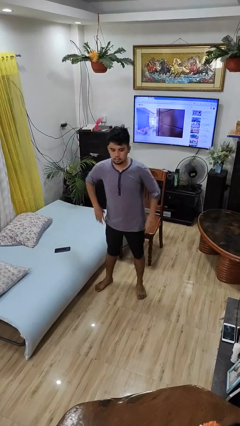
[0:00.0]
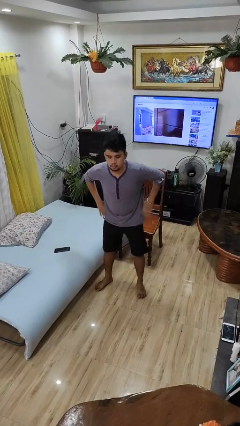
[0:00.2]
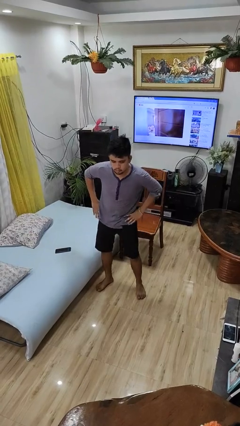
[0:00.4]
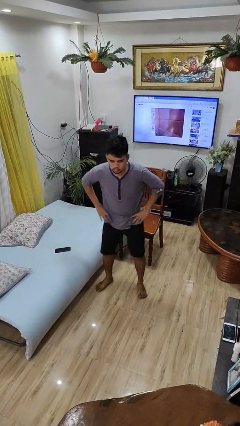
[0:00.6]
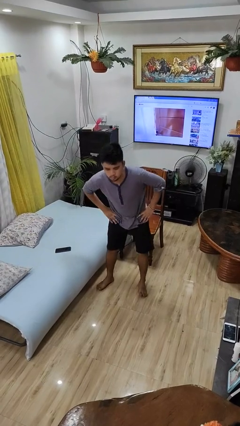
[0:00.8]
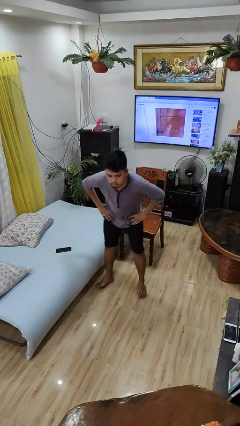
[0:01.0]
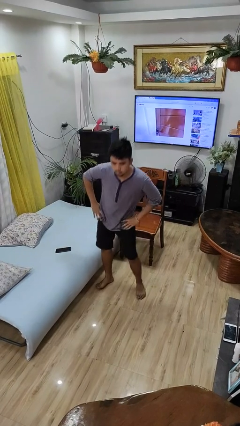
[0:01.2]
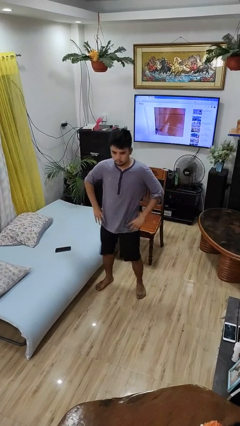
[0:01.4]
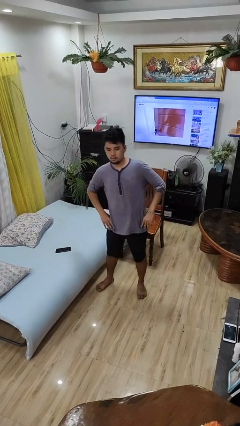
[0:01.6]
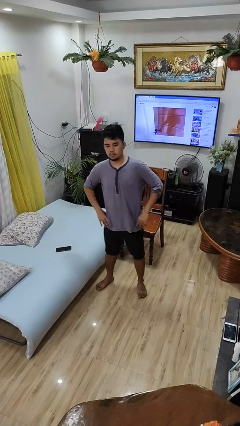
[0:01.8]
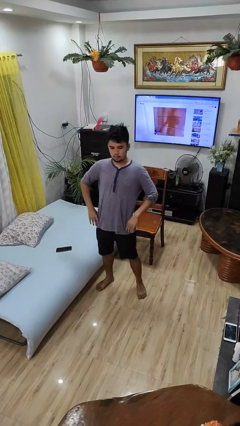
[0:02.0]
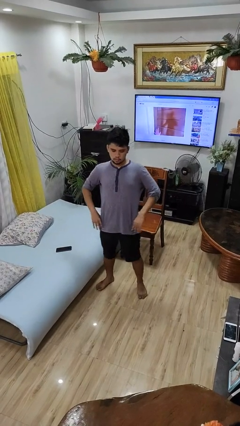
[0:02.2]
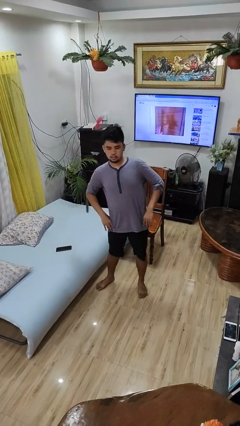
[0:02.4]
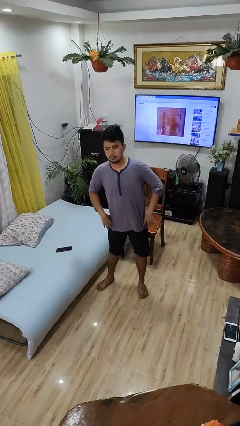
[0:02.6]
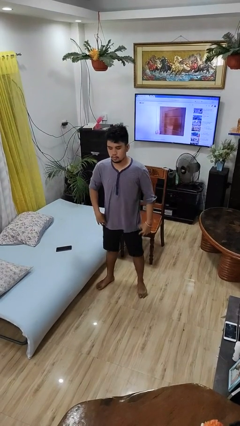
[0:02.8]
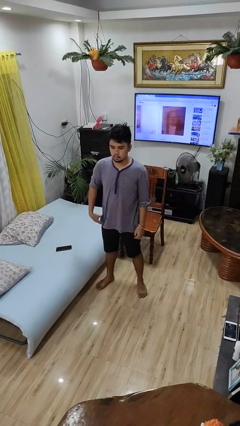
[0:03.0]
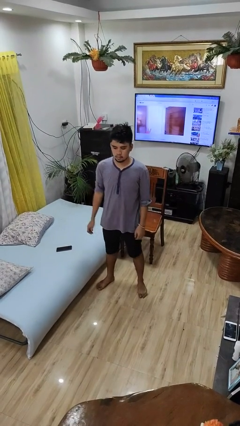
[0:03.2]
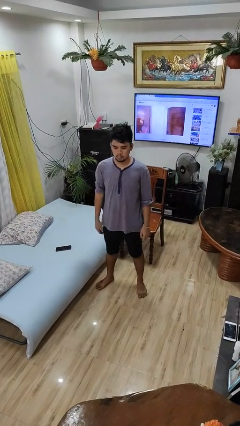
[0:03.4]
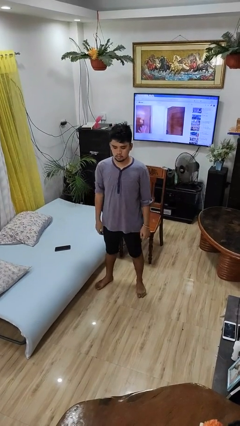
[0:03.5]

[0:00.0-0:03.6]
person wiggles hips

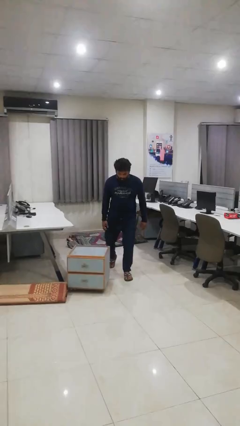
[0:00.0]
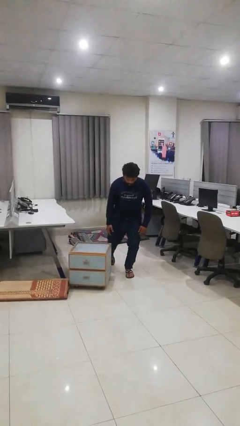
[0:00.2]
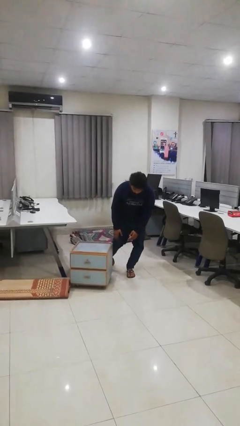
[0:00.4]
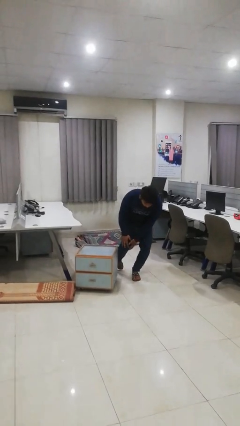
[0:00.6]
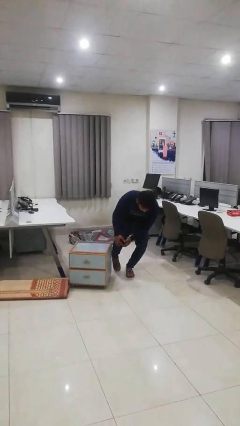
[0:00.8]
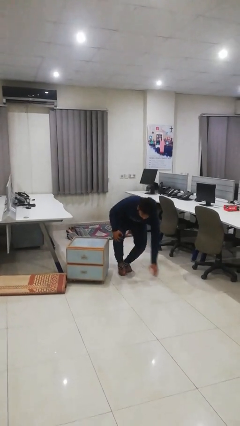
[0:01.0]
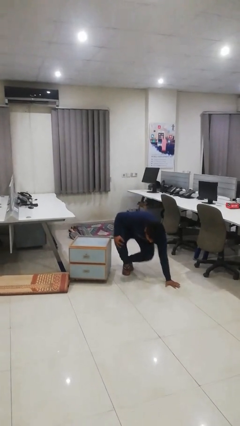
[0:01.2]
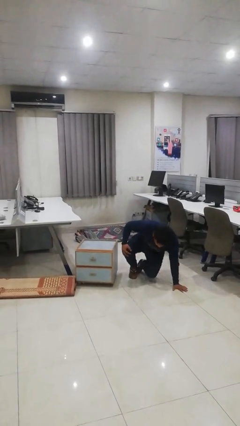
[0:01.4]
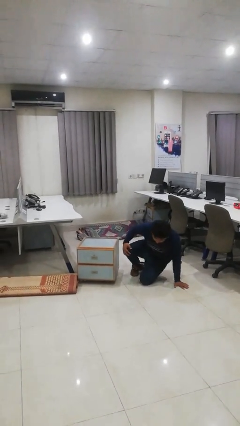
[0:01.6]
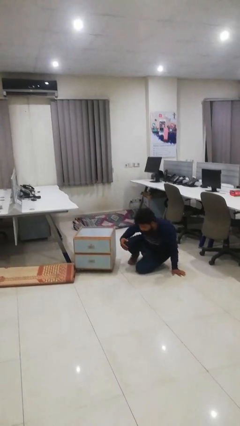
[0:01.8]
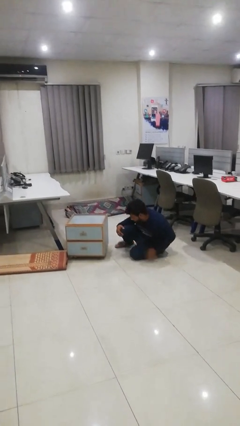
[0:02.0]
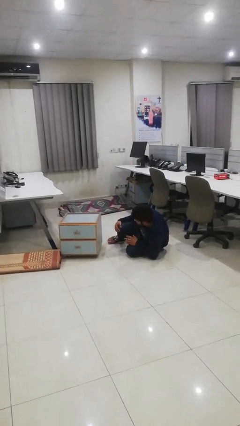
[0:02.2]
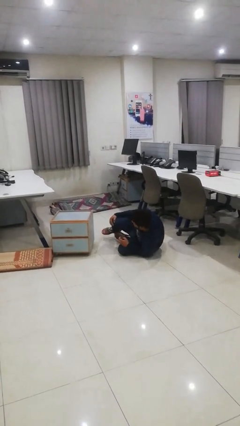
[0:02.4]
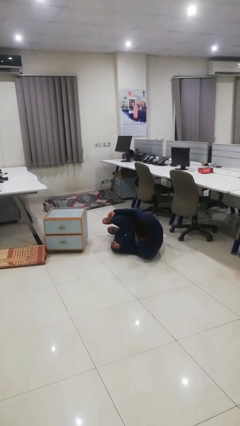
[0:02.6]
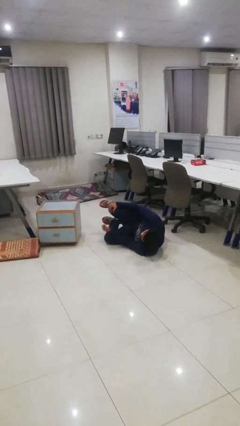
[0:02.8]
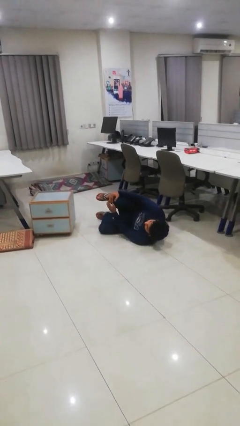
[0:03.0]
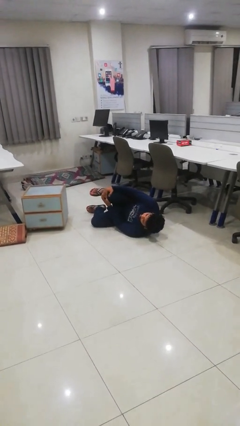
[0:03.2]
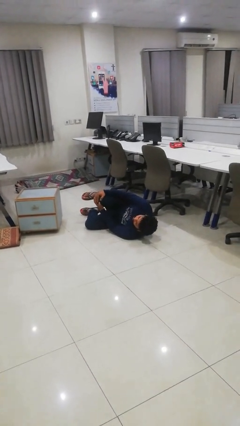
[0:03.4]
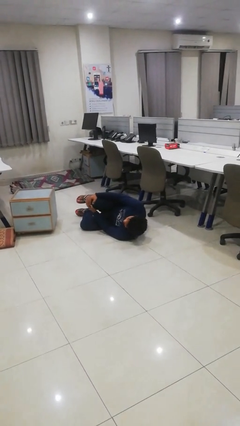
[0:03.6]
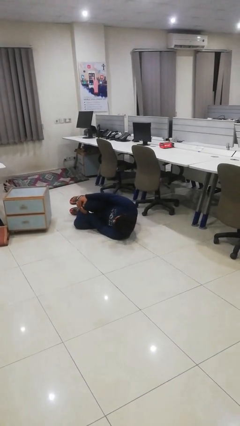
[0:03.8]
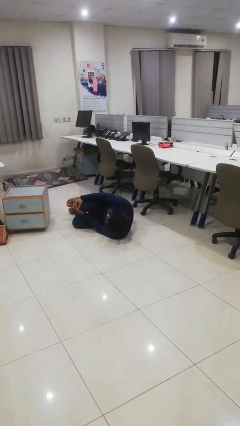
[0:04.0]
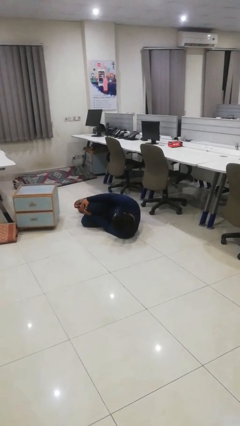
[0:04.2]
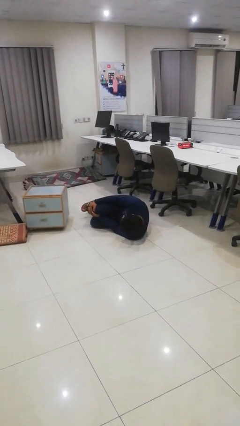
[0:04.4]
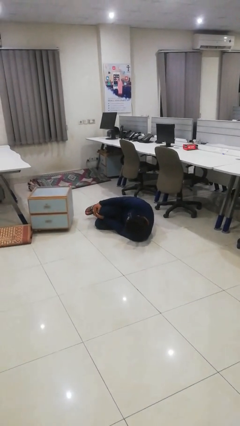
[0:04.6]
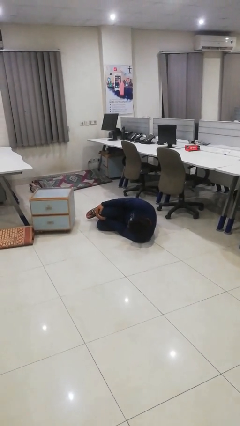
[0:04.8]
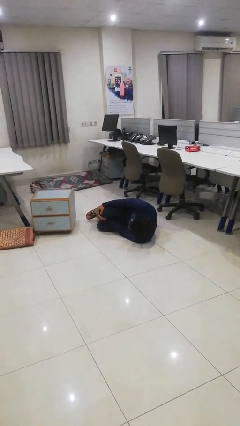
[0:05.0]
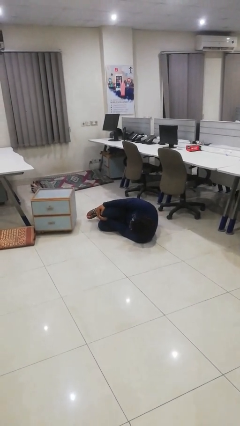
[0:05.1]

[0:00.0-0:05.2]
person trips on object on floor

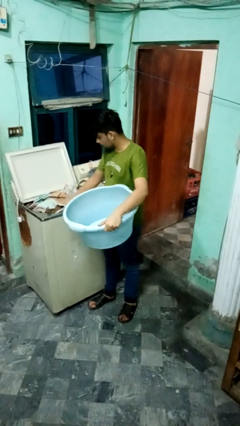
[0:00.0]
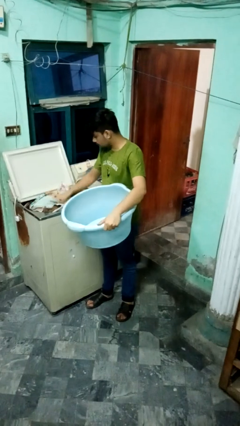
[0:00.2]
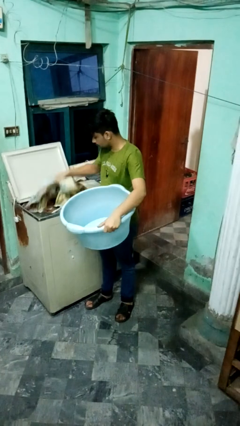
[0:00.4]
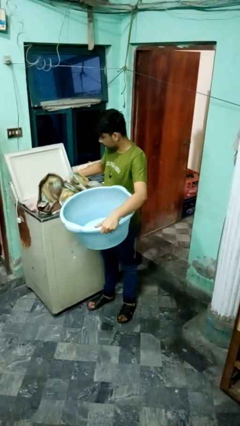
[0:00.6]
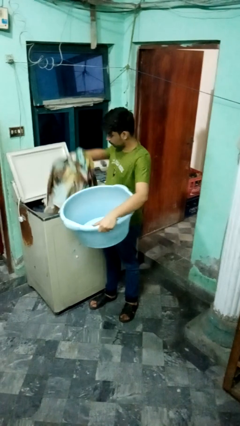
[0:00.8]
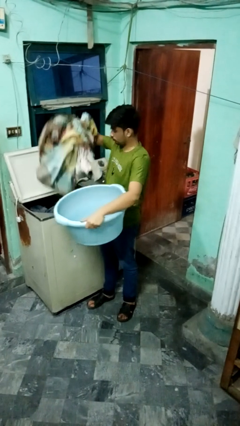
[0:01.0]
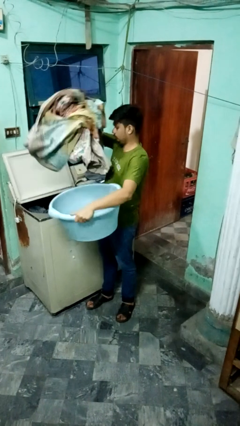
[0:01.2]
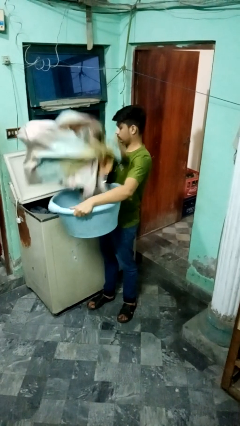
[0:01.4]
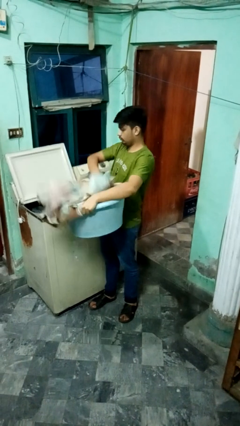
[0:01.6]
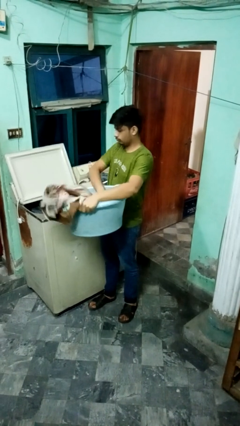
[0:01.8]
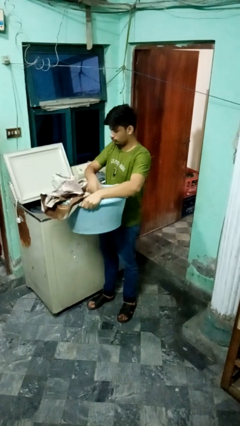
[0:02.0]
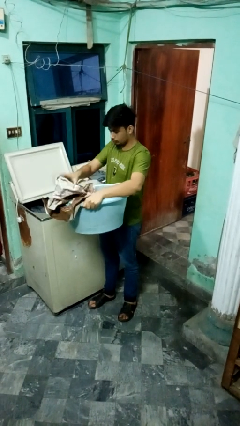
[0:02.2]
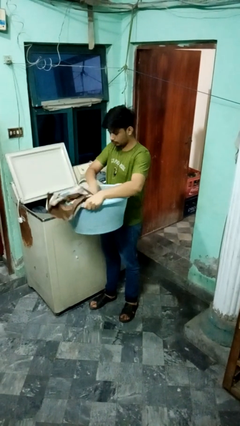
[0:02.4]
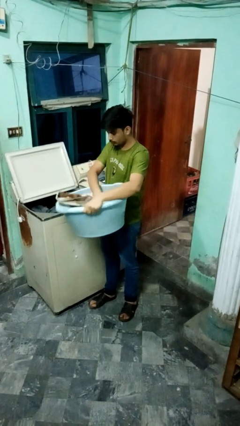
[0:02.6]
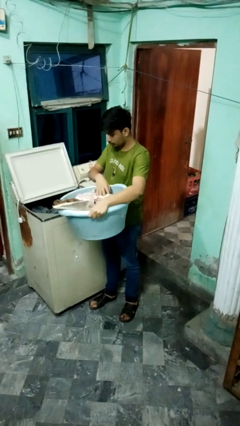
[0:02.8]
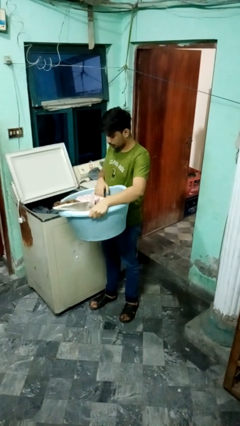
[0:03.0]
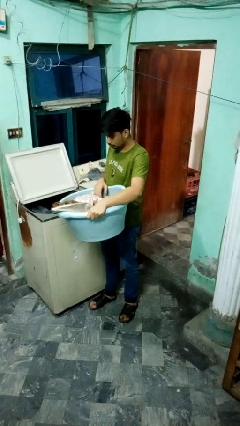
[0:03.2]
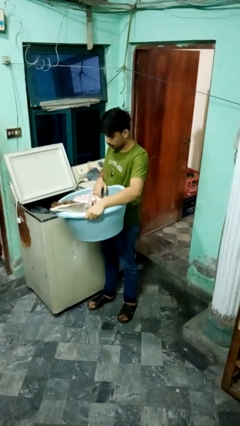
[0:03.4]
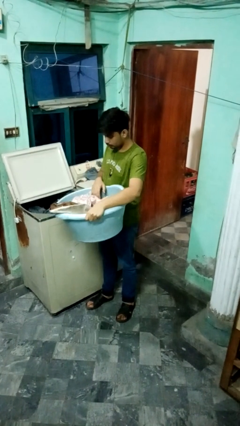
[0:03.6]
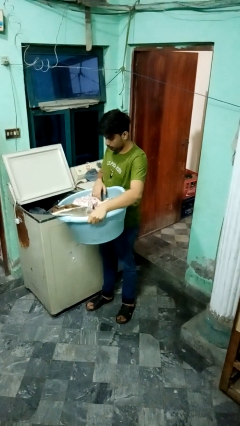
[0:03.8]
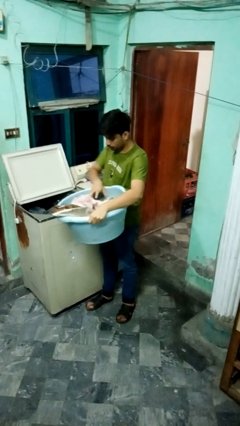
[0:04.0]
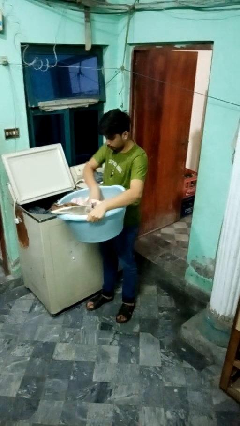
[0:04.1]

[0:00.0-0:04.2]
person unloads clotheswasher

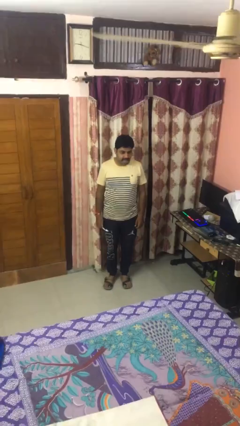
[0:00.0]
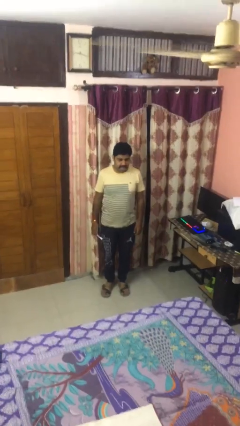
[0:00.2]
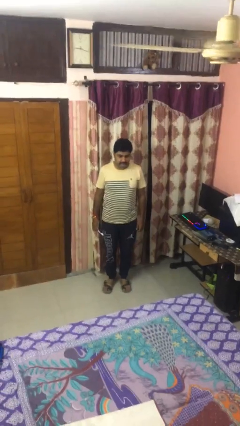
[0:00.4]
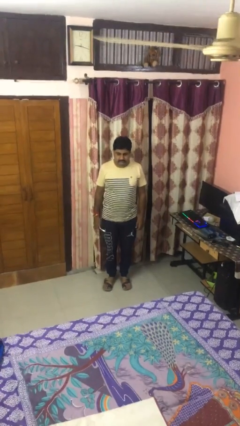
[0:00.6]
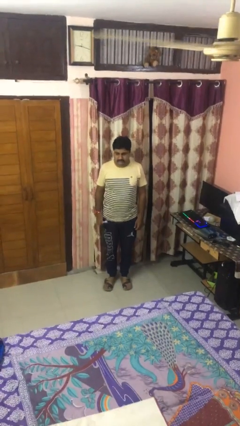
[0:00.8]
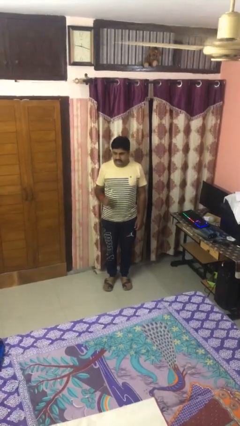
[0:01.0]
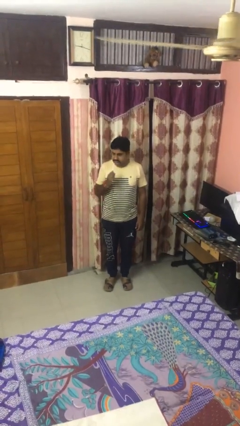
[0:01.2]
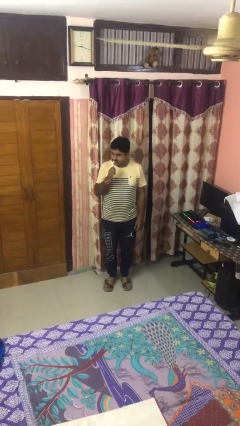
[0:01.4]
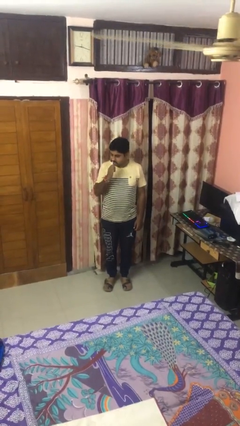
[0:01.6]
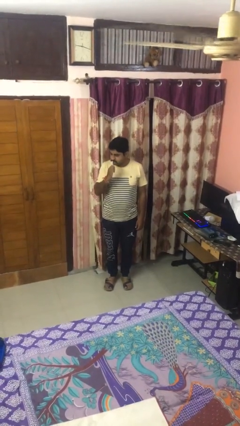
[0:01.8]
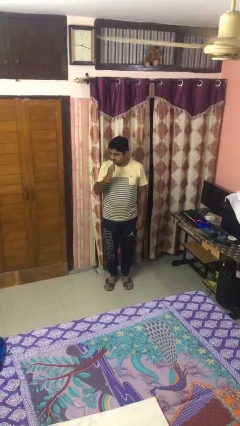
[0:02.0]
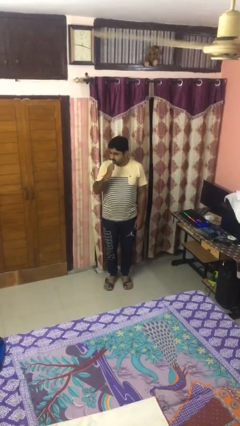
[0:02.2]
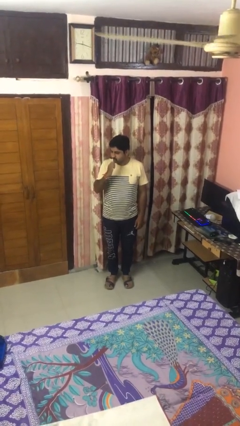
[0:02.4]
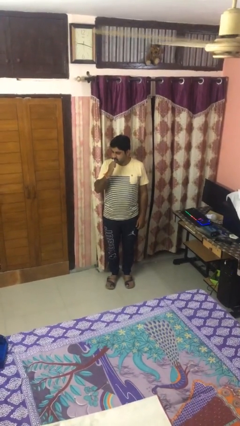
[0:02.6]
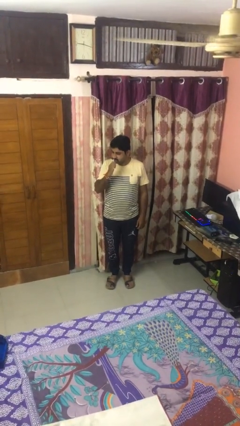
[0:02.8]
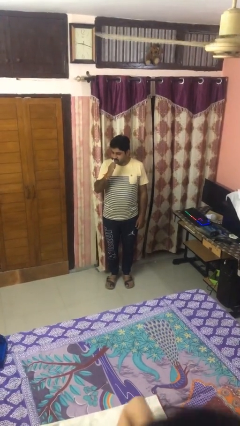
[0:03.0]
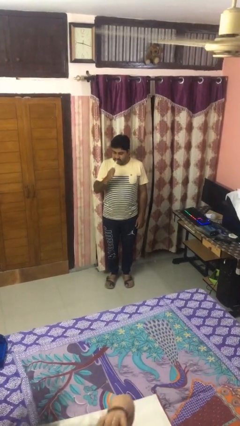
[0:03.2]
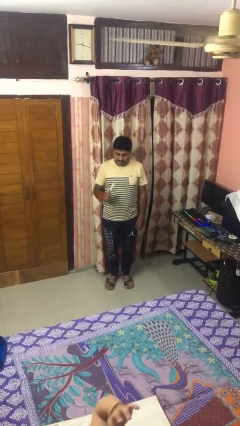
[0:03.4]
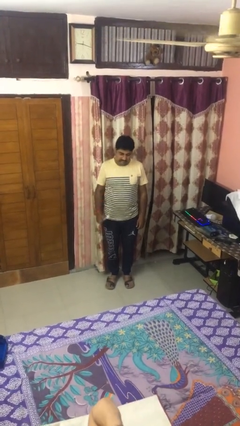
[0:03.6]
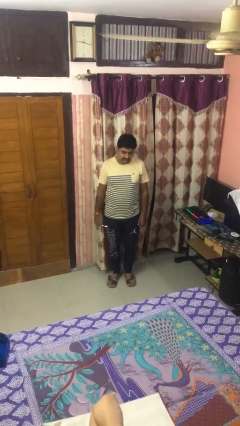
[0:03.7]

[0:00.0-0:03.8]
person brushes teeth

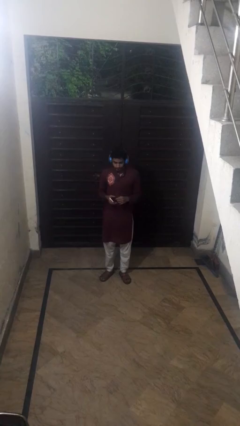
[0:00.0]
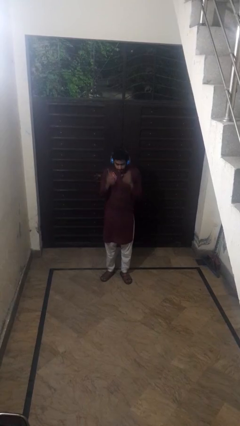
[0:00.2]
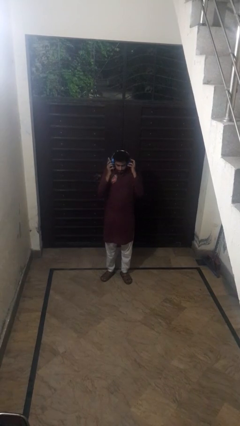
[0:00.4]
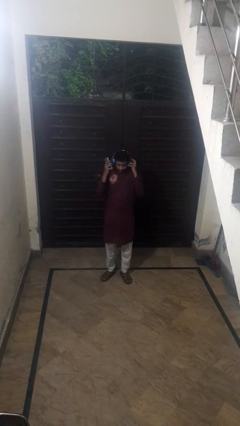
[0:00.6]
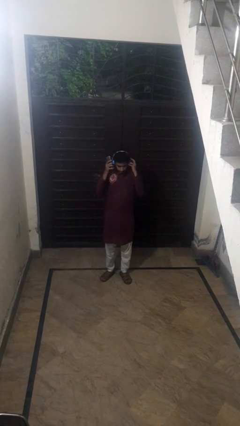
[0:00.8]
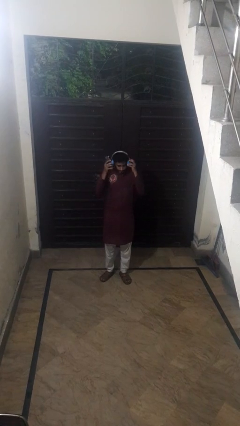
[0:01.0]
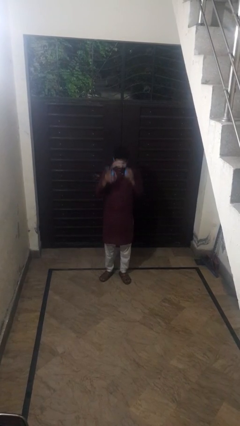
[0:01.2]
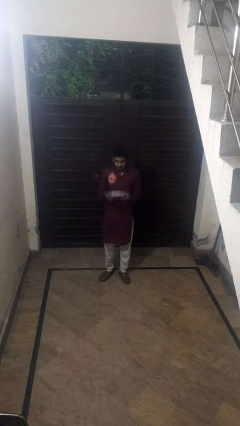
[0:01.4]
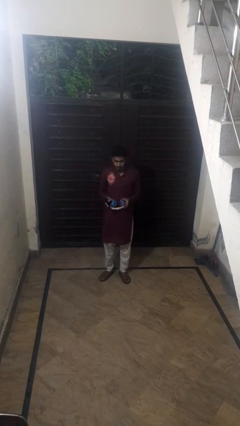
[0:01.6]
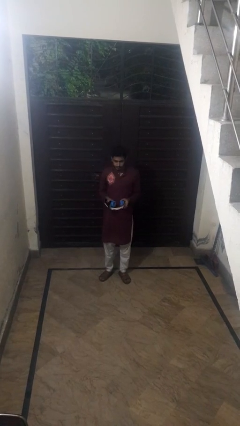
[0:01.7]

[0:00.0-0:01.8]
person takes off headphones
